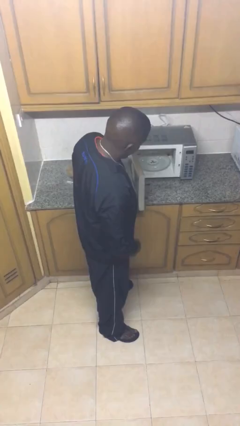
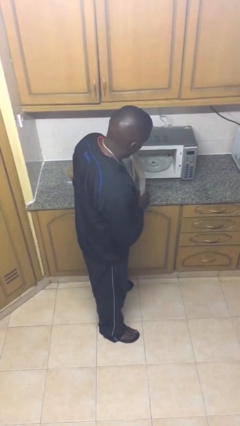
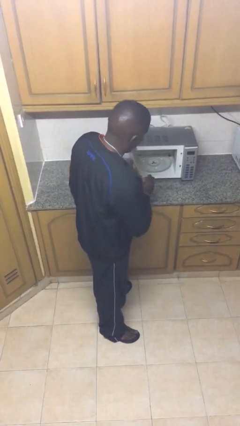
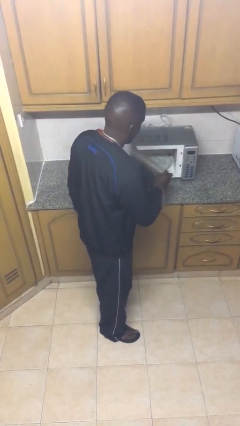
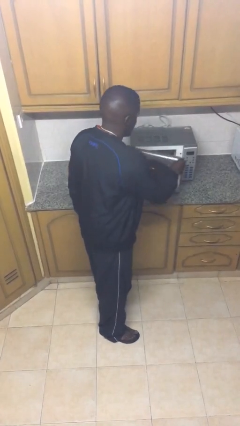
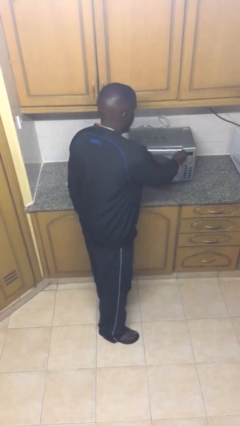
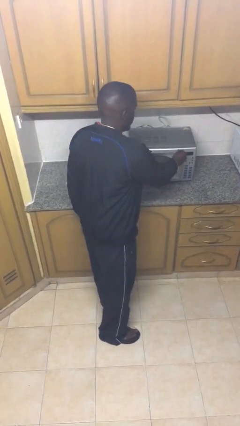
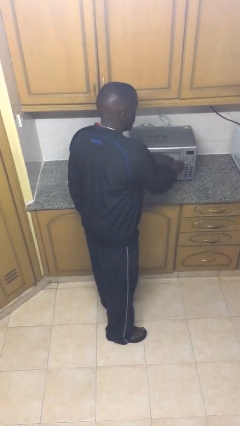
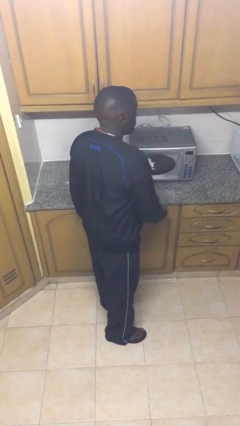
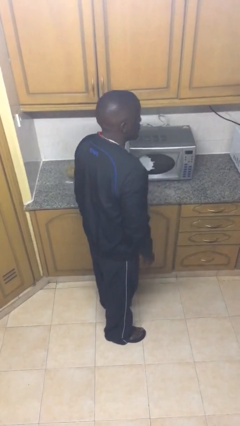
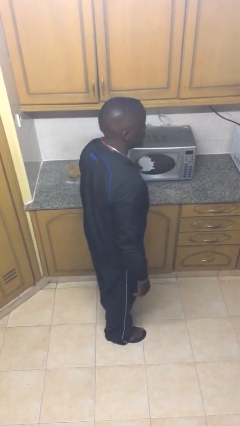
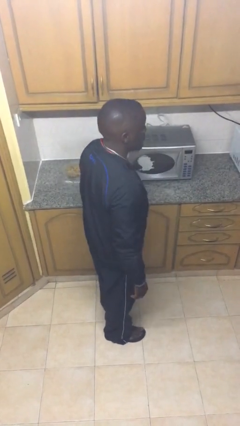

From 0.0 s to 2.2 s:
person closes microwave

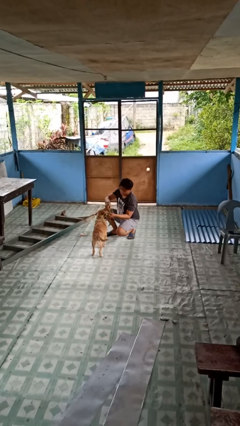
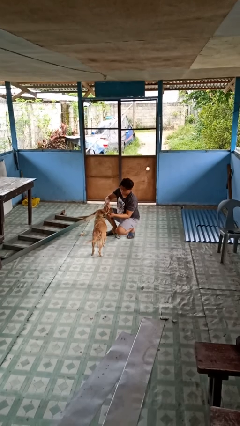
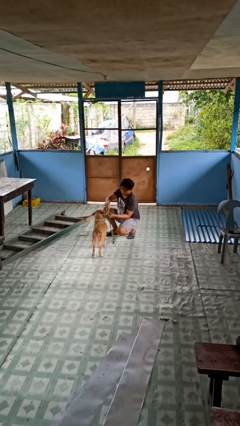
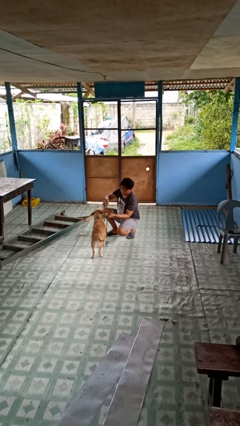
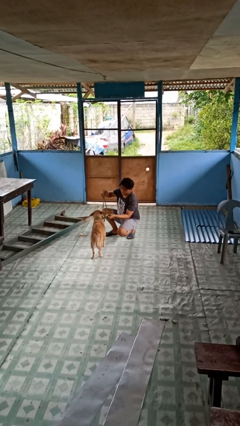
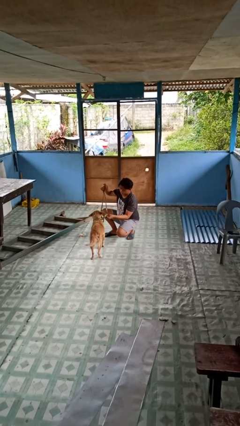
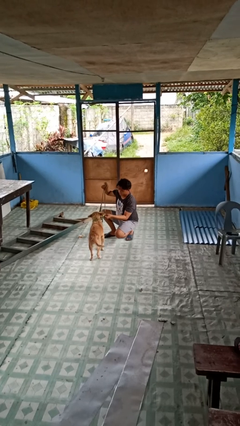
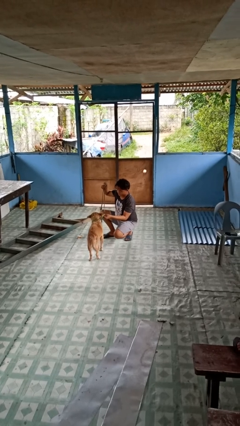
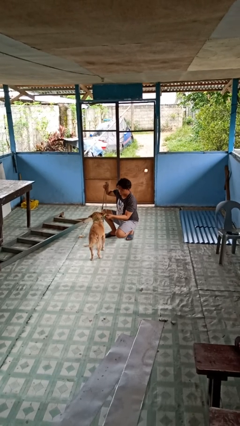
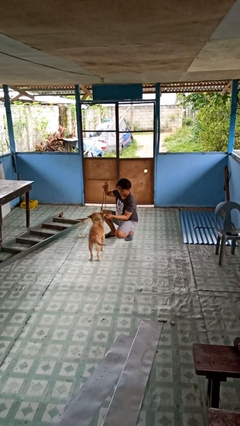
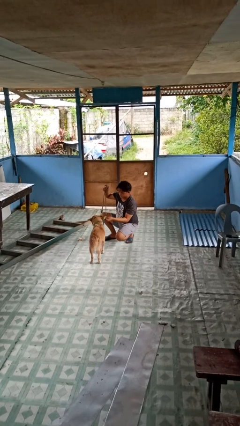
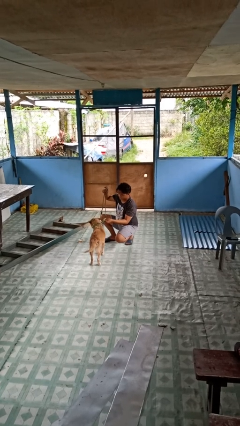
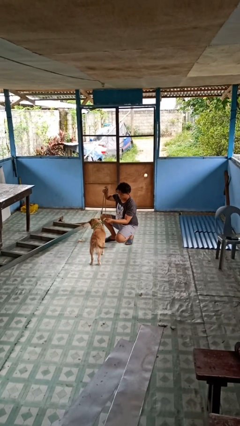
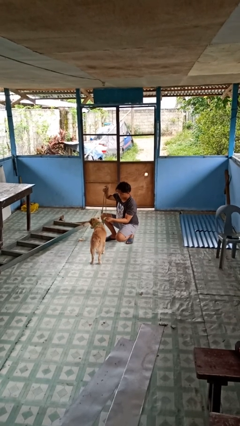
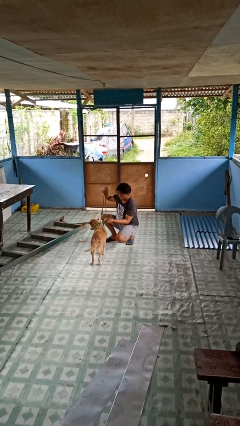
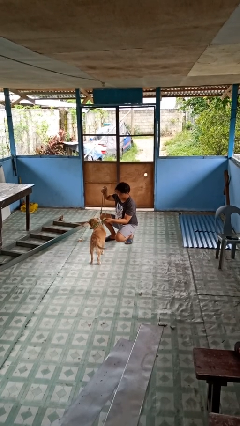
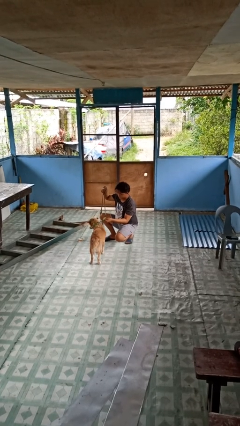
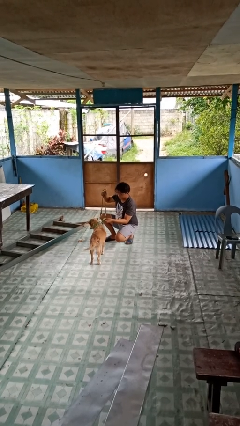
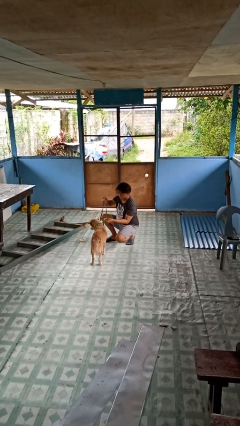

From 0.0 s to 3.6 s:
person attaches leash to dog

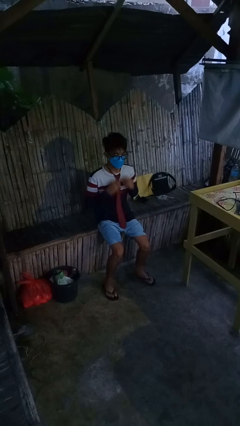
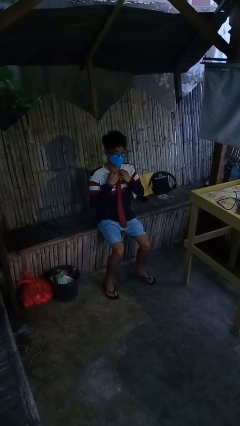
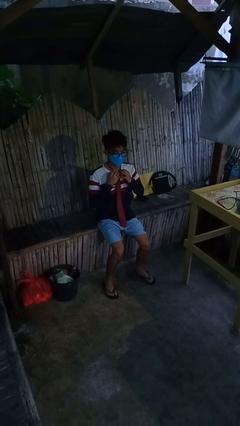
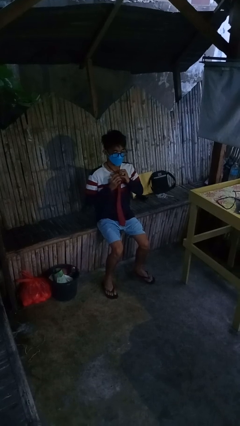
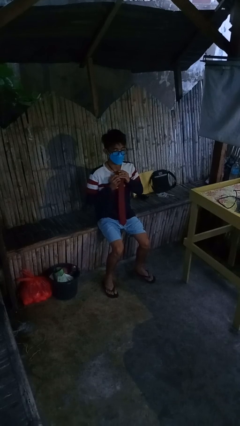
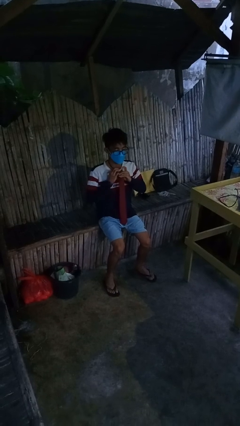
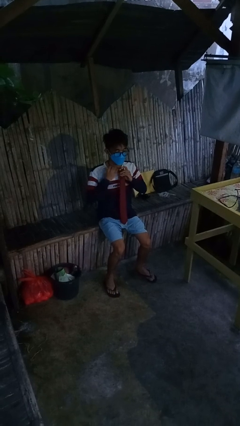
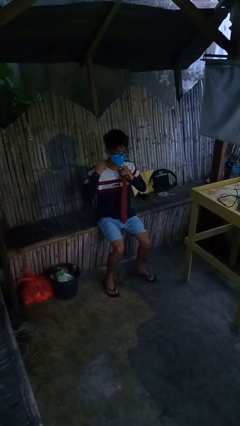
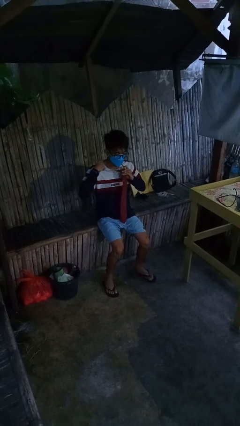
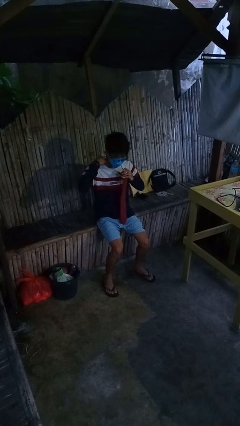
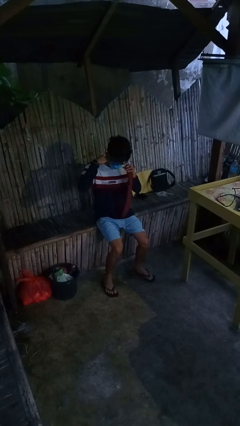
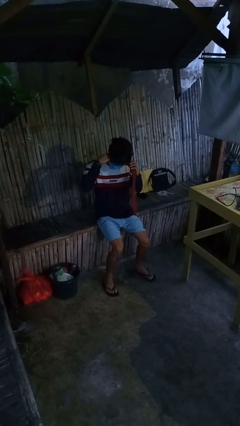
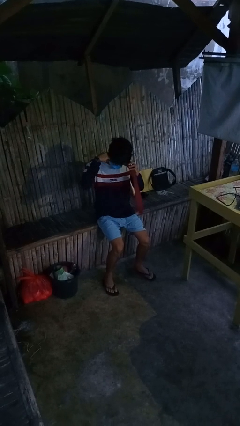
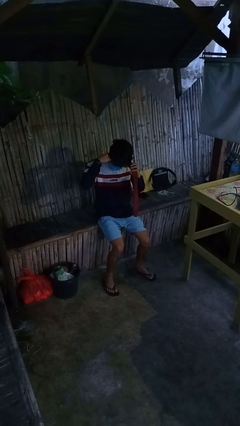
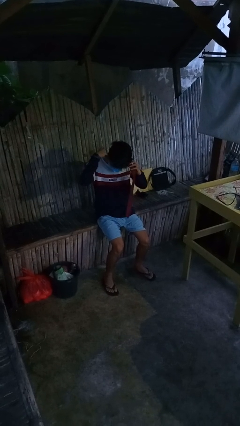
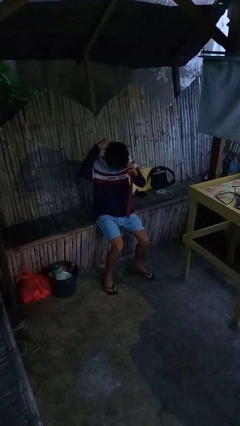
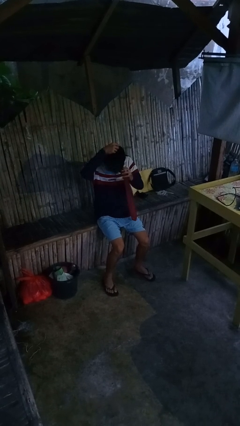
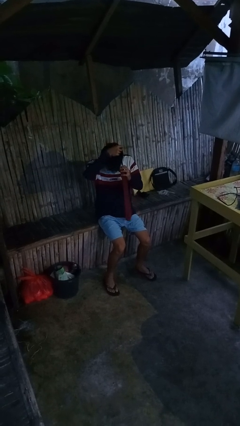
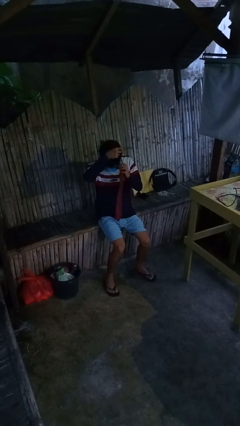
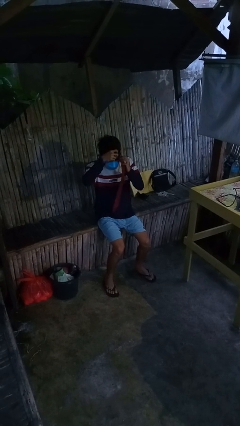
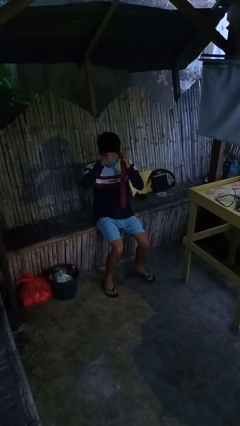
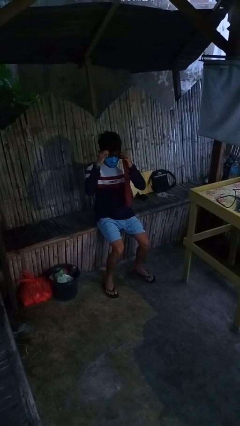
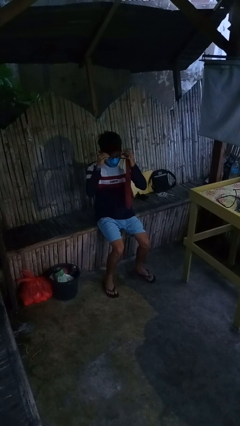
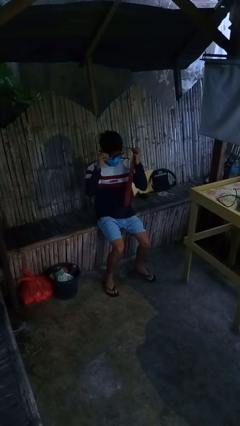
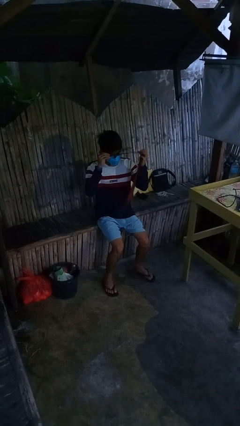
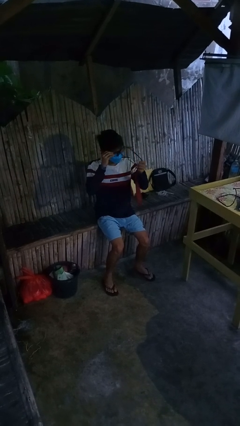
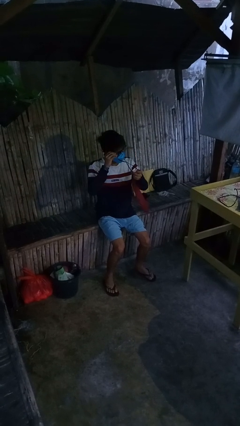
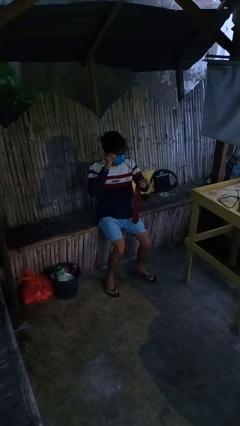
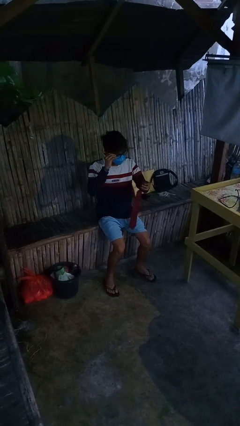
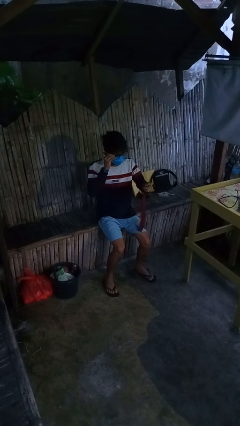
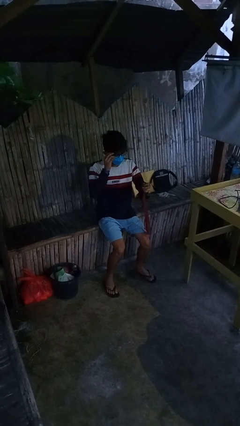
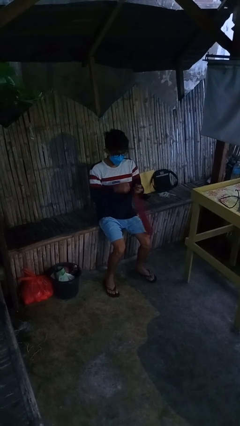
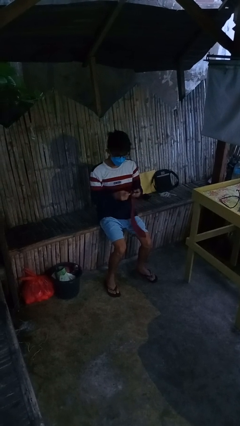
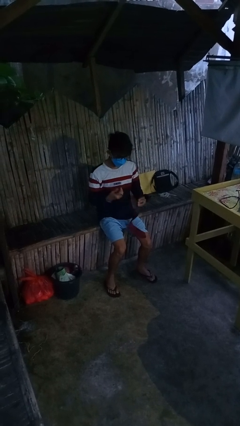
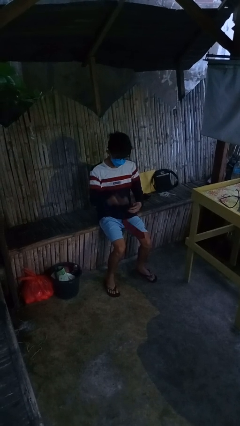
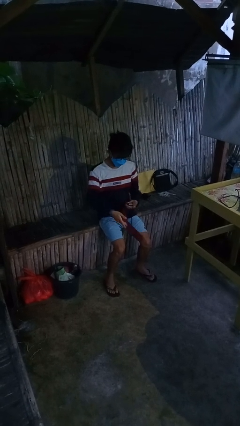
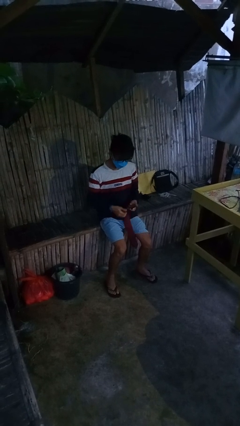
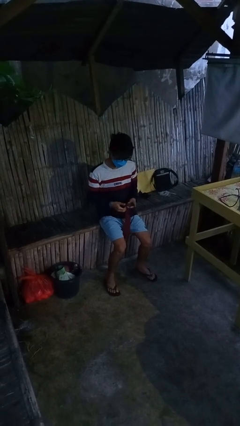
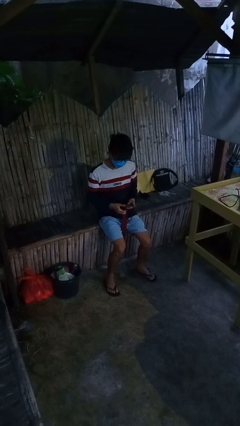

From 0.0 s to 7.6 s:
person takes off necktie

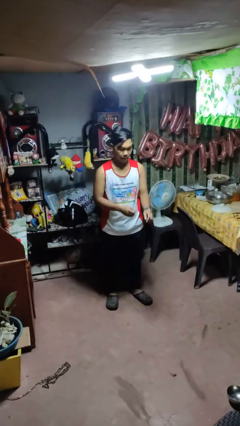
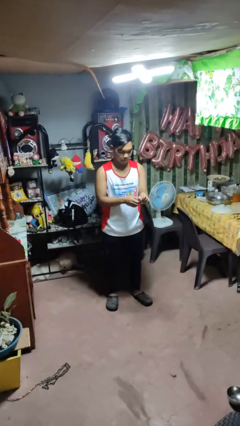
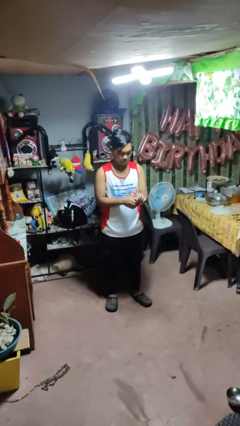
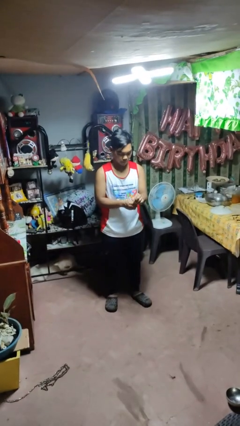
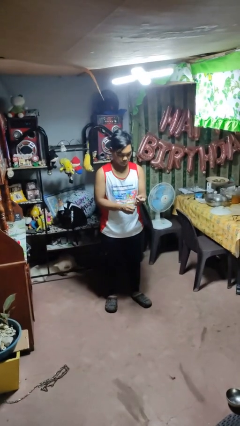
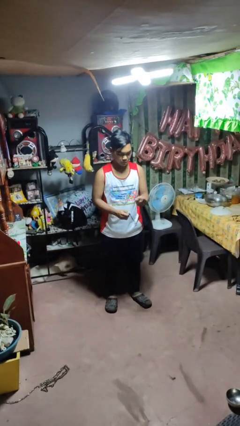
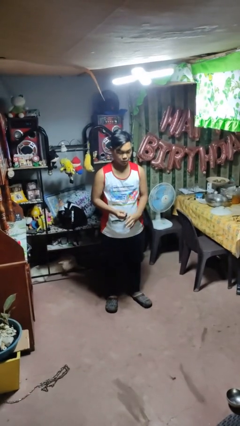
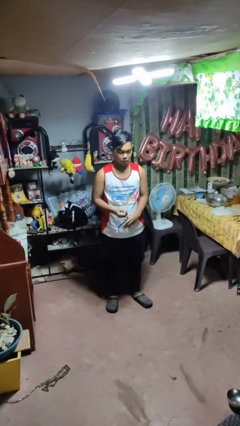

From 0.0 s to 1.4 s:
person takes off wristwatch

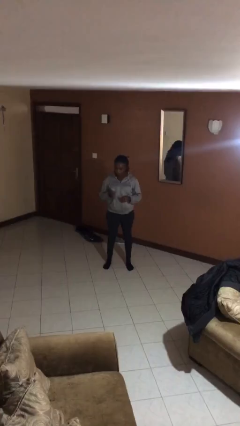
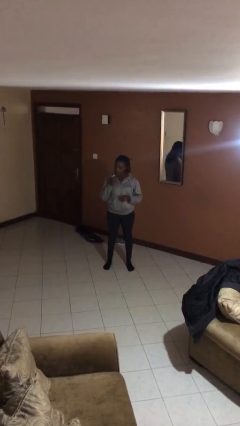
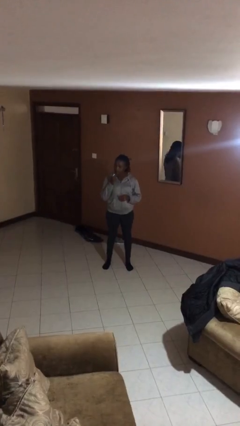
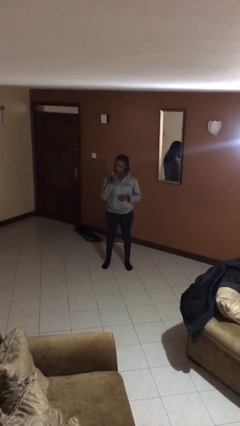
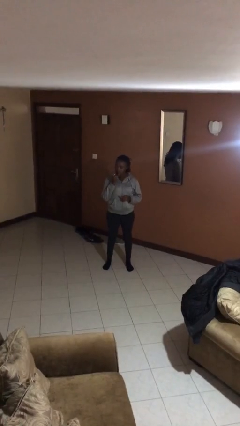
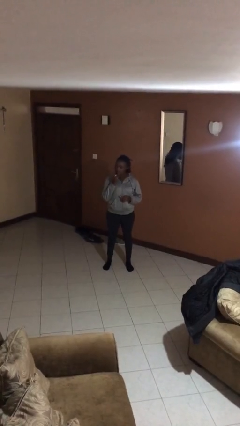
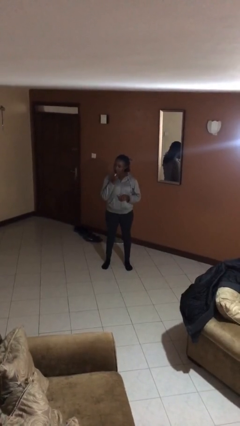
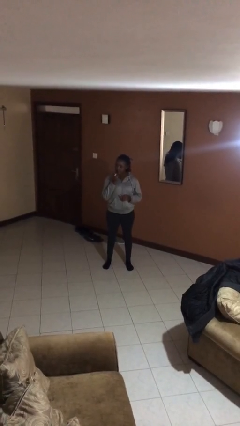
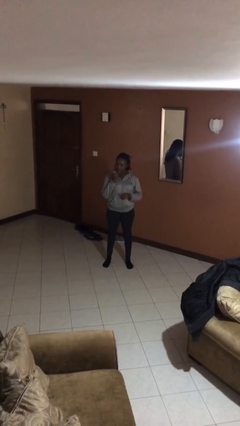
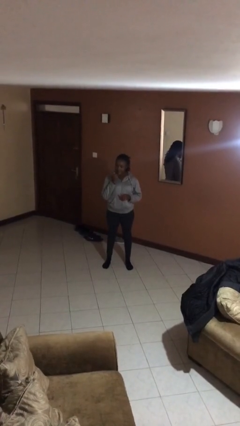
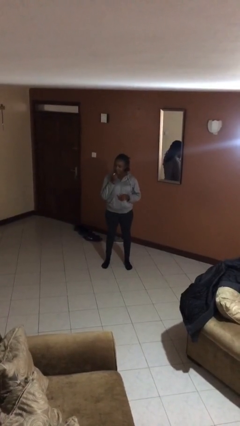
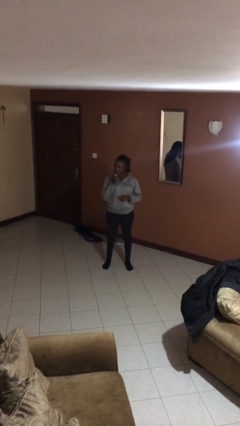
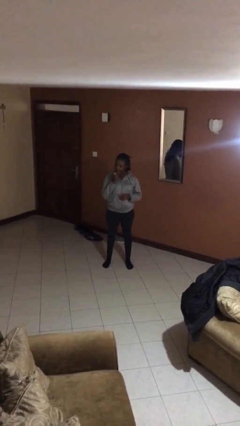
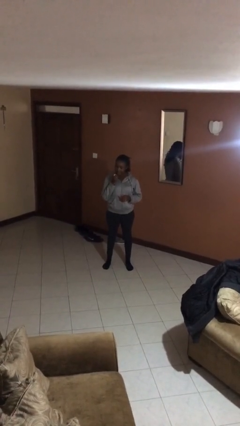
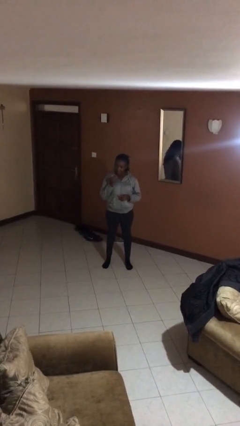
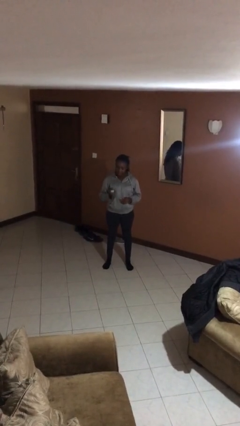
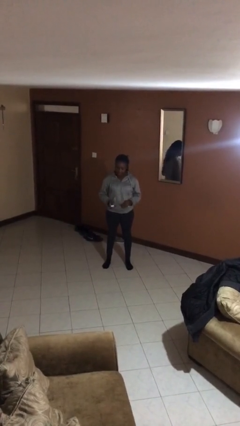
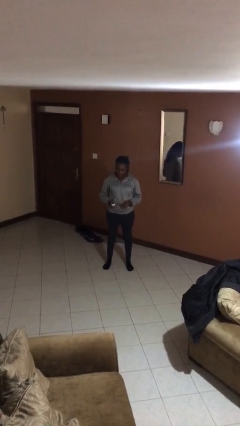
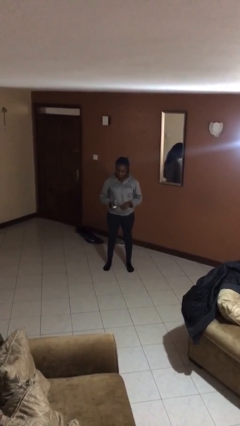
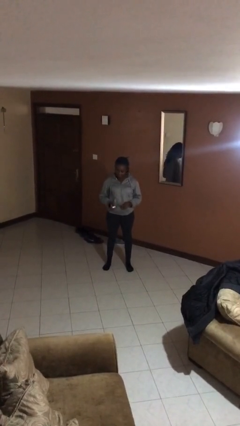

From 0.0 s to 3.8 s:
person applies lip makeup
